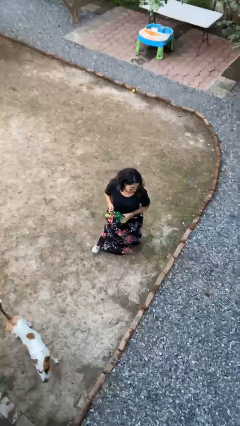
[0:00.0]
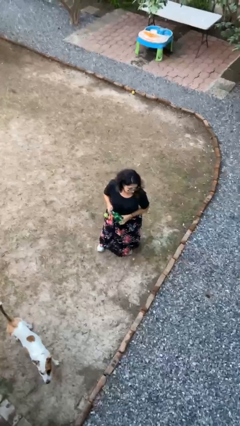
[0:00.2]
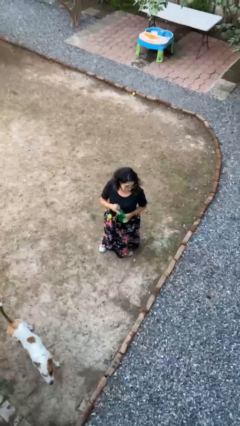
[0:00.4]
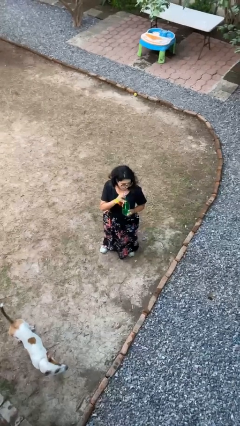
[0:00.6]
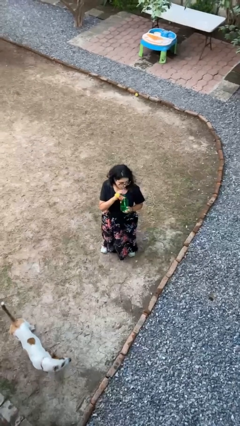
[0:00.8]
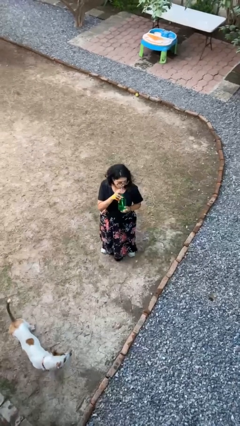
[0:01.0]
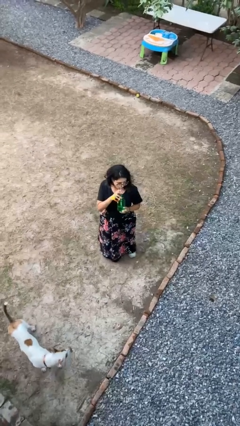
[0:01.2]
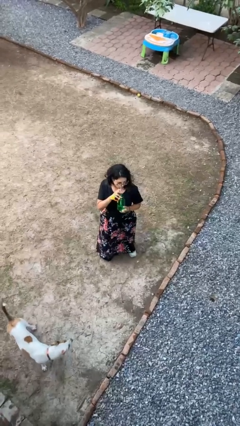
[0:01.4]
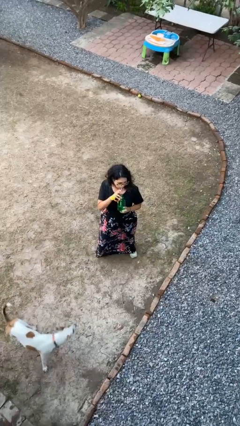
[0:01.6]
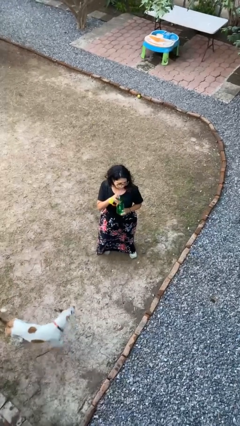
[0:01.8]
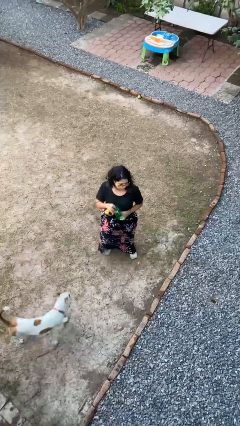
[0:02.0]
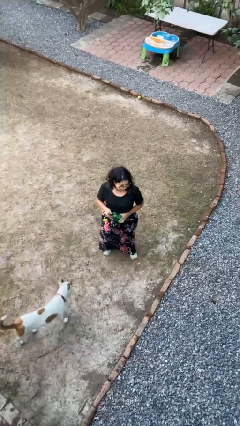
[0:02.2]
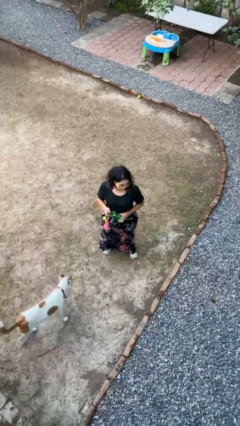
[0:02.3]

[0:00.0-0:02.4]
person drinks from straw

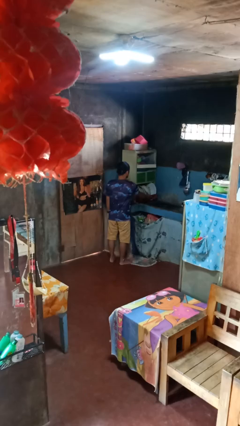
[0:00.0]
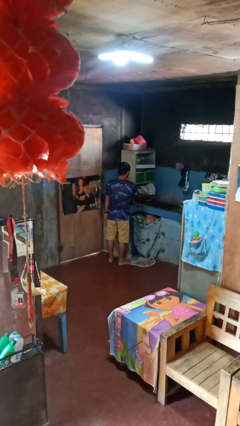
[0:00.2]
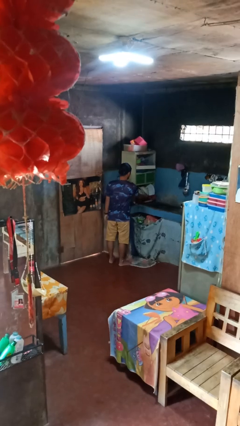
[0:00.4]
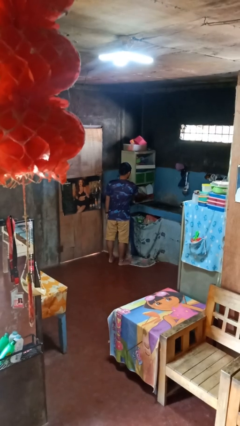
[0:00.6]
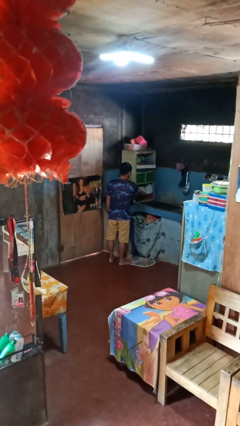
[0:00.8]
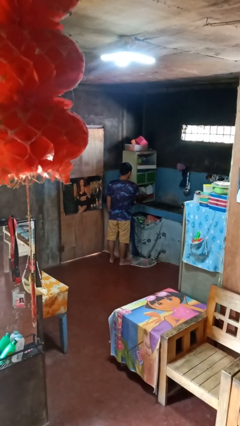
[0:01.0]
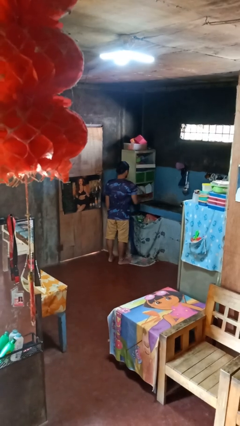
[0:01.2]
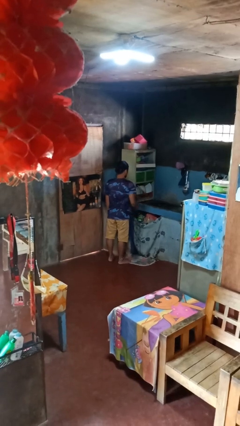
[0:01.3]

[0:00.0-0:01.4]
person closes dishwasher

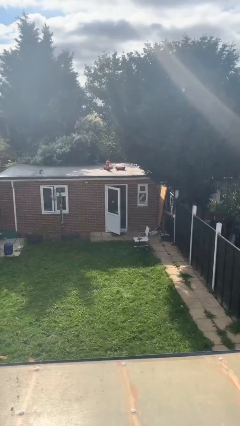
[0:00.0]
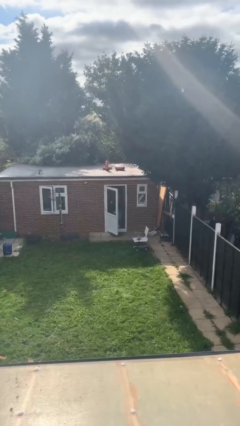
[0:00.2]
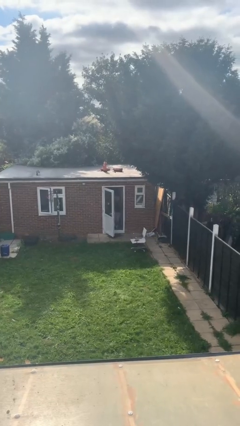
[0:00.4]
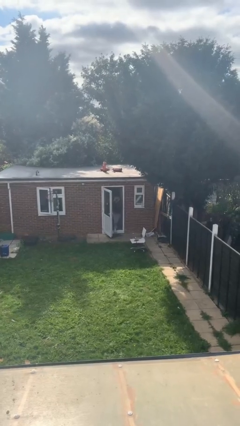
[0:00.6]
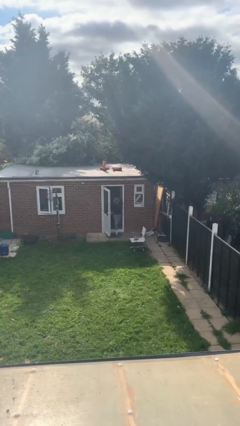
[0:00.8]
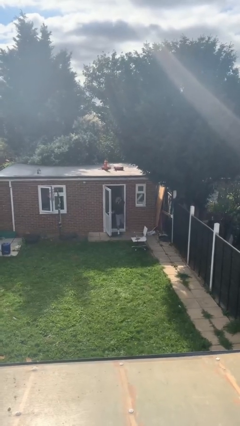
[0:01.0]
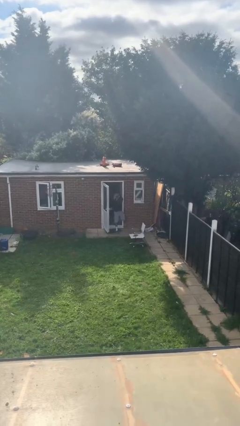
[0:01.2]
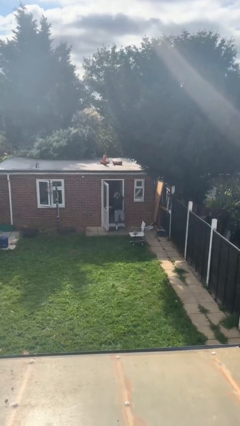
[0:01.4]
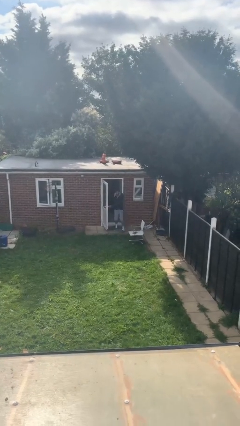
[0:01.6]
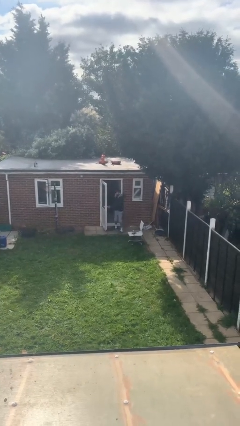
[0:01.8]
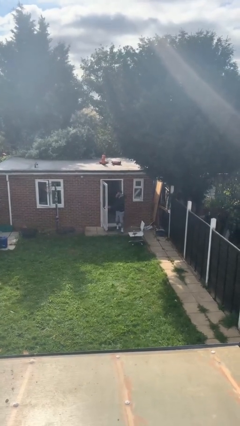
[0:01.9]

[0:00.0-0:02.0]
person enters scene through structure

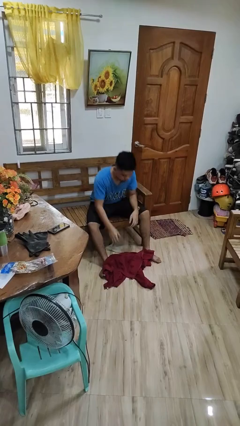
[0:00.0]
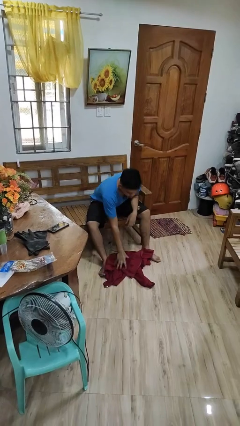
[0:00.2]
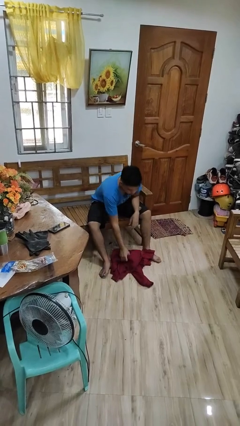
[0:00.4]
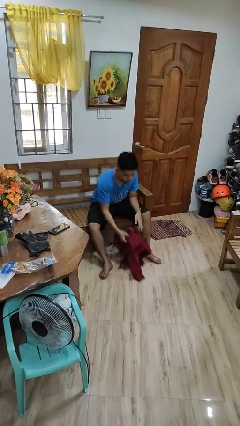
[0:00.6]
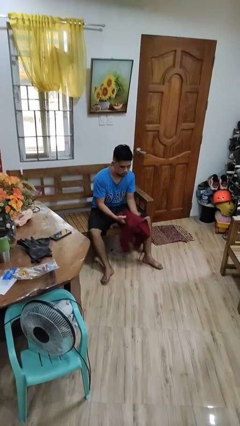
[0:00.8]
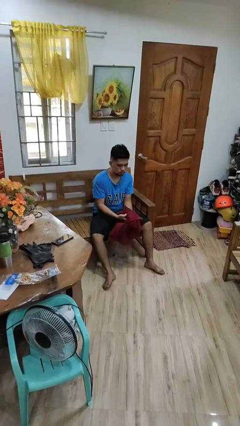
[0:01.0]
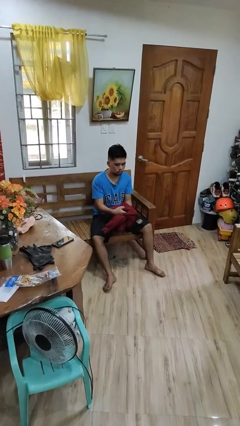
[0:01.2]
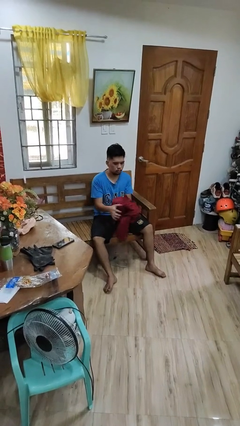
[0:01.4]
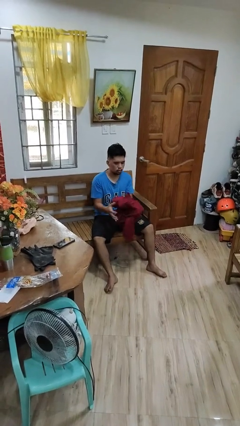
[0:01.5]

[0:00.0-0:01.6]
person picks up object from floor

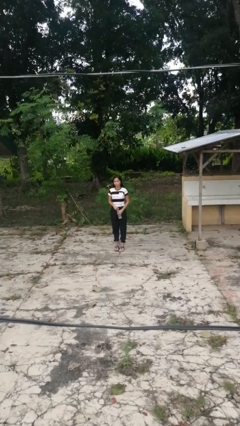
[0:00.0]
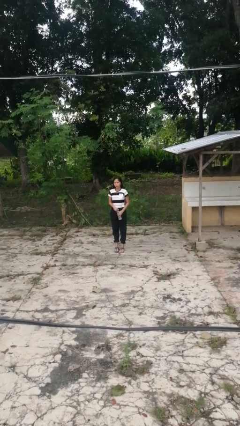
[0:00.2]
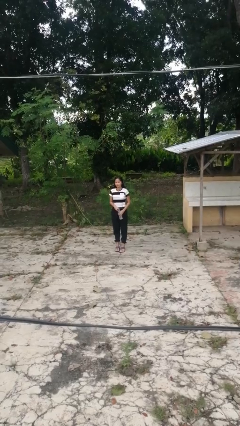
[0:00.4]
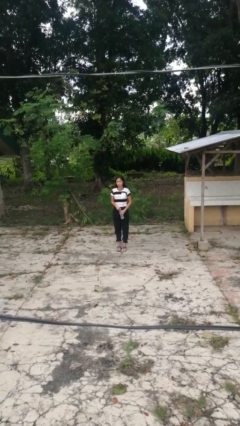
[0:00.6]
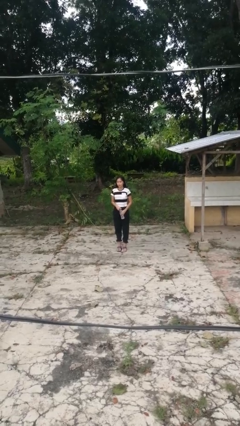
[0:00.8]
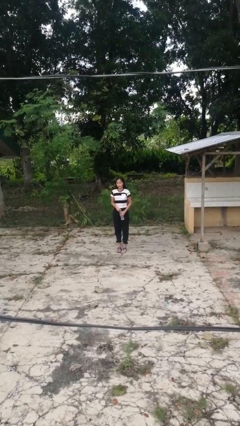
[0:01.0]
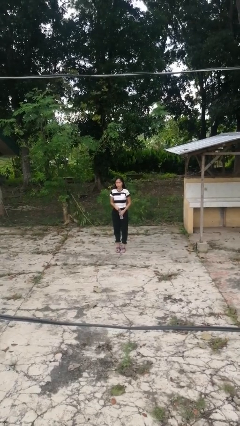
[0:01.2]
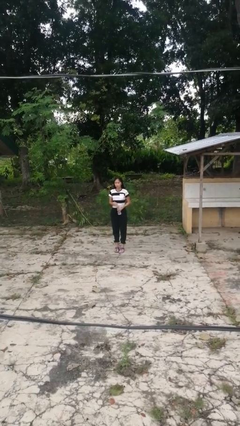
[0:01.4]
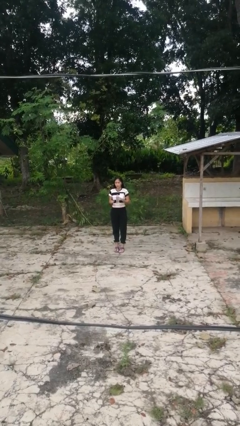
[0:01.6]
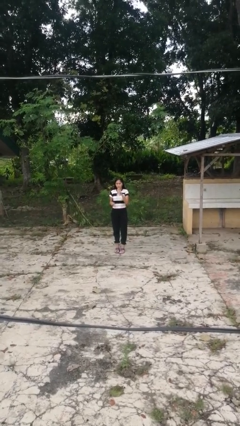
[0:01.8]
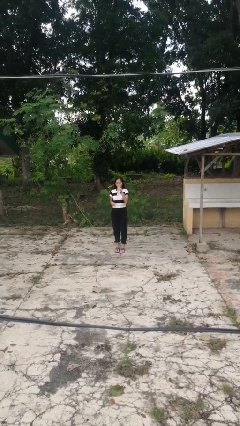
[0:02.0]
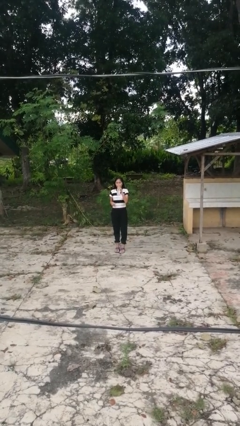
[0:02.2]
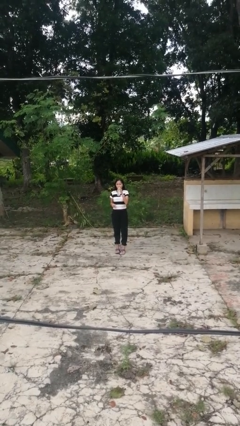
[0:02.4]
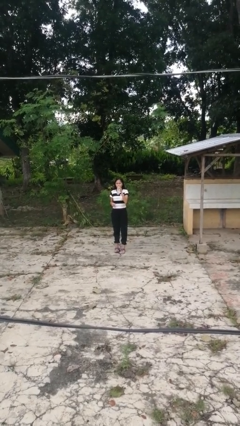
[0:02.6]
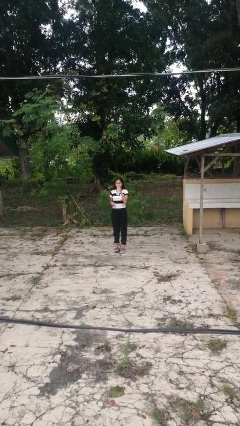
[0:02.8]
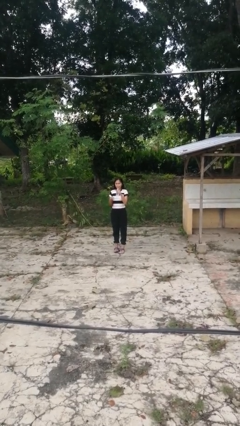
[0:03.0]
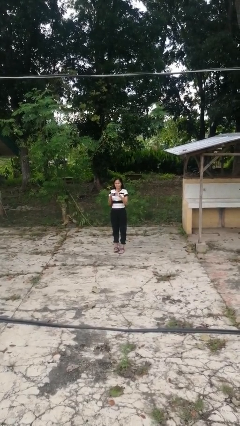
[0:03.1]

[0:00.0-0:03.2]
person drinks from bottle

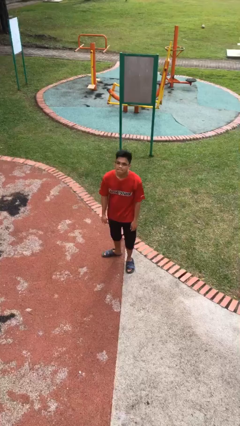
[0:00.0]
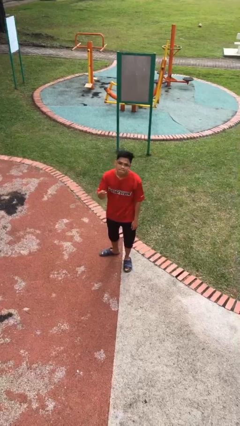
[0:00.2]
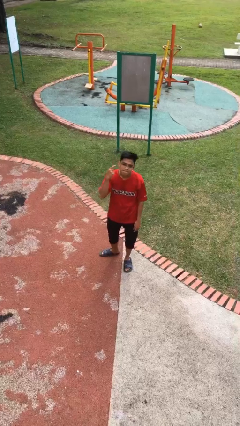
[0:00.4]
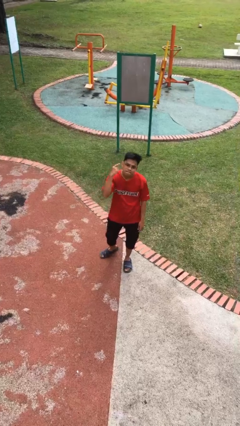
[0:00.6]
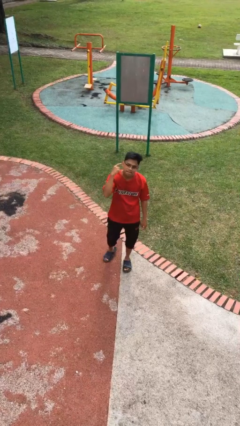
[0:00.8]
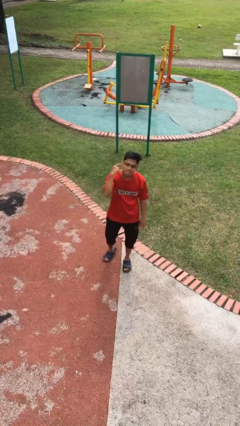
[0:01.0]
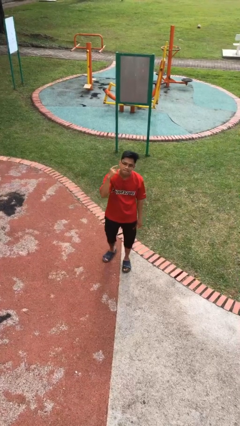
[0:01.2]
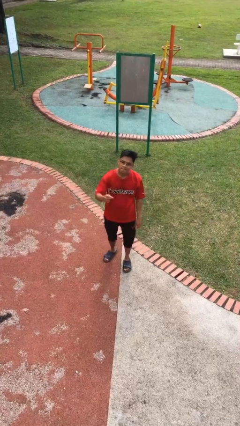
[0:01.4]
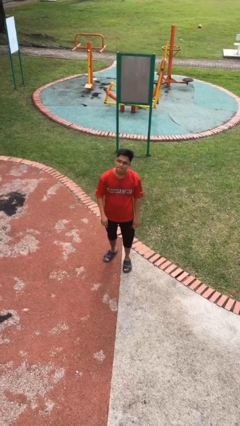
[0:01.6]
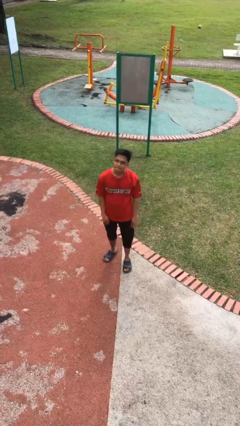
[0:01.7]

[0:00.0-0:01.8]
person gestures listen closely

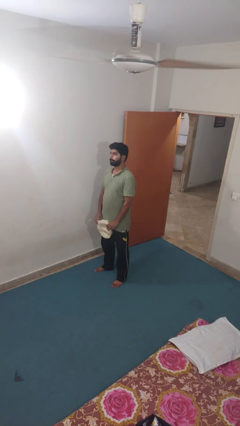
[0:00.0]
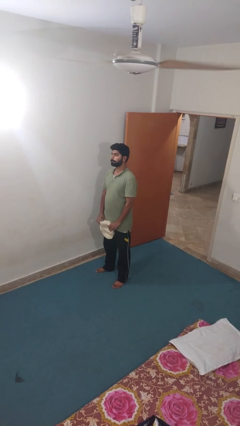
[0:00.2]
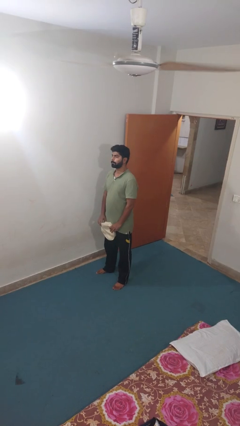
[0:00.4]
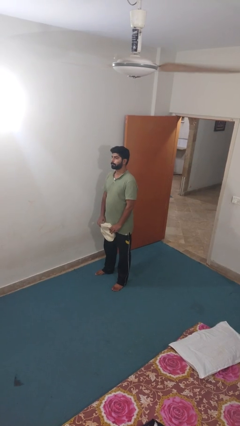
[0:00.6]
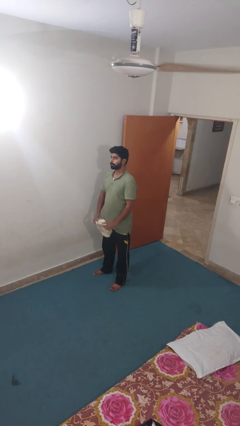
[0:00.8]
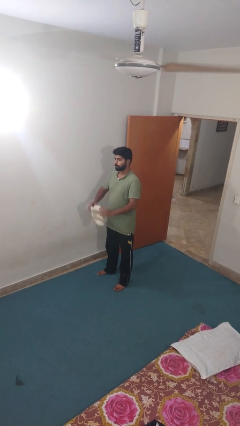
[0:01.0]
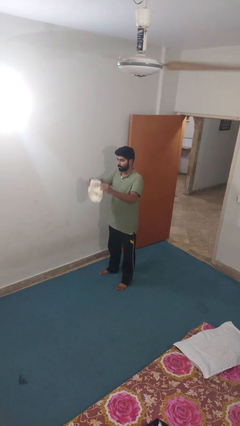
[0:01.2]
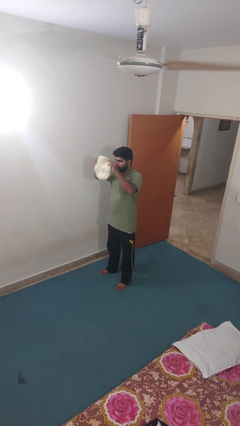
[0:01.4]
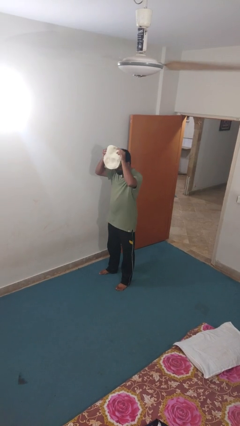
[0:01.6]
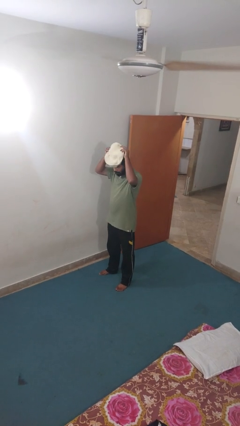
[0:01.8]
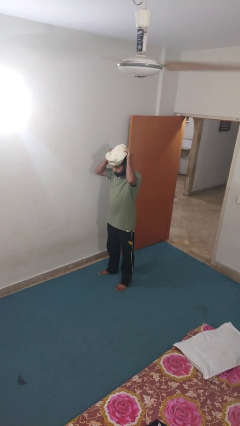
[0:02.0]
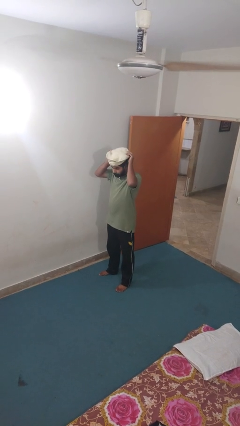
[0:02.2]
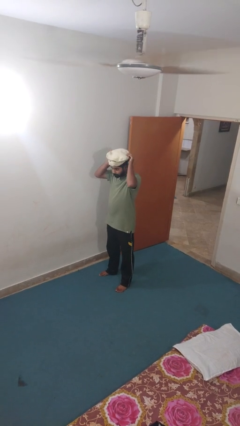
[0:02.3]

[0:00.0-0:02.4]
person puts on hat

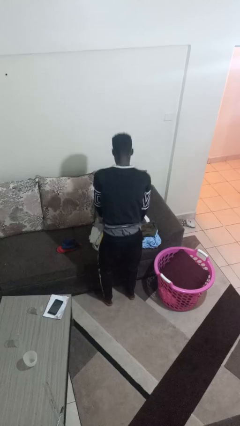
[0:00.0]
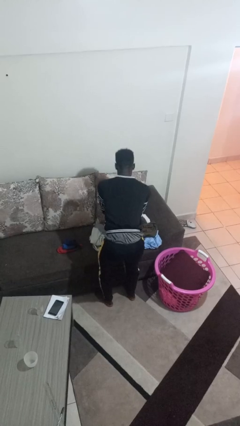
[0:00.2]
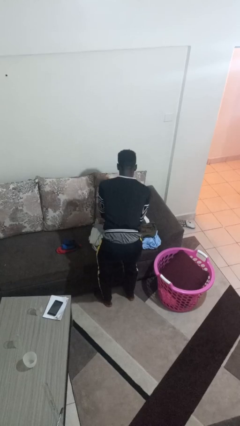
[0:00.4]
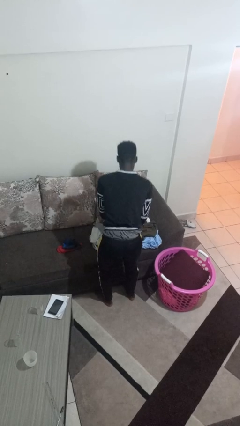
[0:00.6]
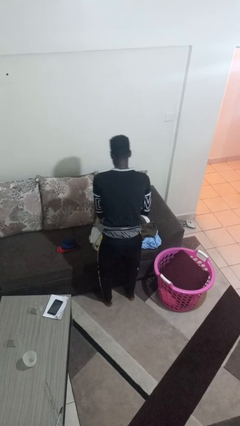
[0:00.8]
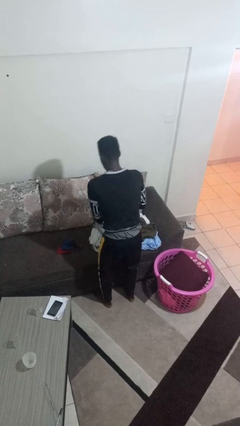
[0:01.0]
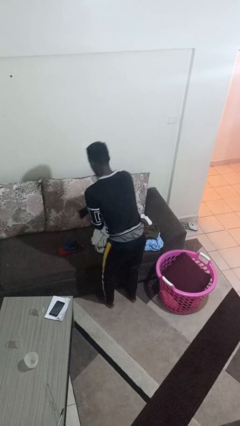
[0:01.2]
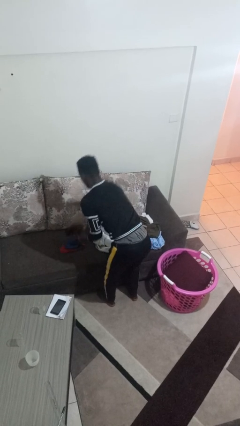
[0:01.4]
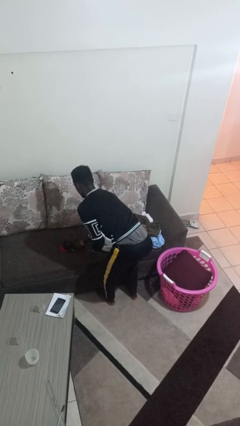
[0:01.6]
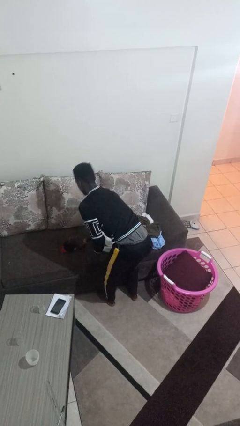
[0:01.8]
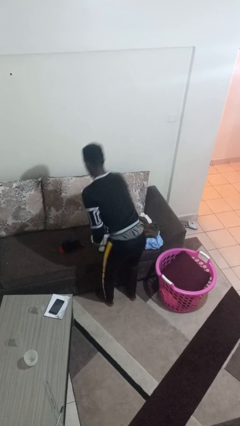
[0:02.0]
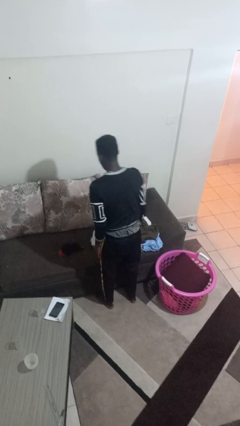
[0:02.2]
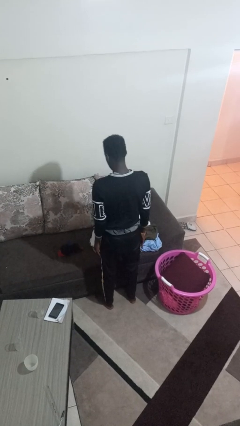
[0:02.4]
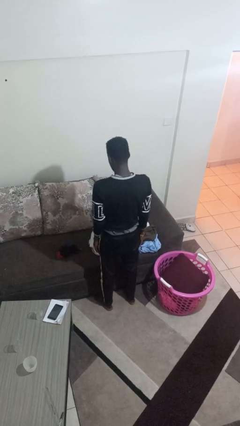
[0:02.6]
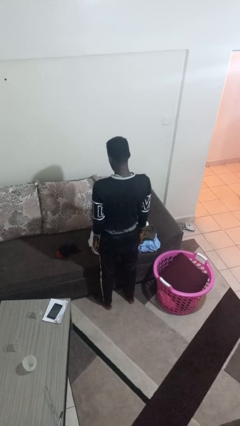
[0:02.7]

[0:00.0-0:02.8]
person folds socks
